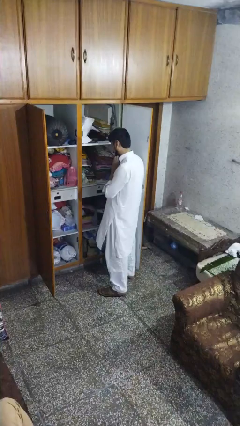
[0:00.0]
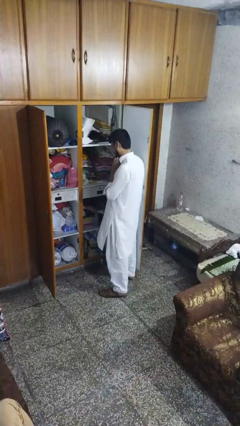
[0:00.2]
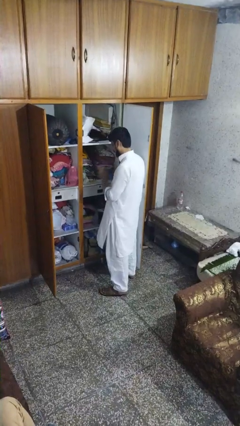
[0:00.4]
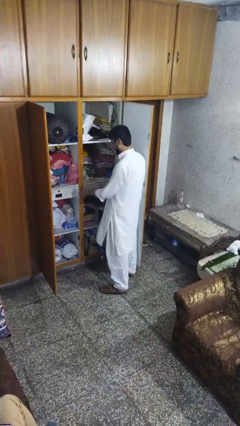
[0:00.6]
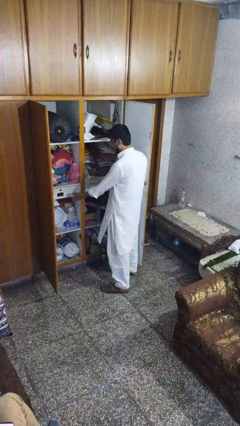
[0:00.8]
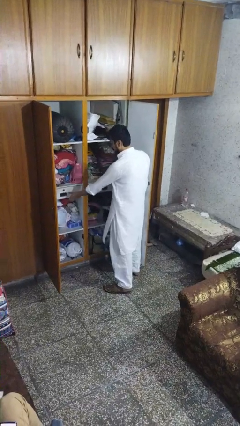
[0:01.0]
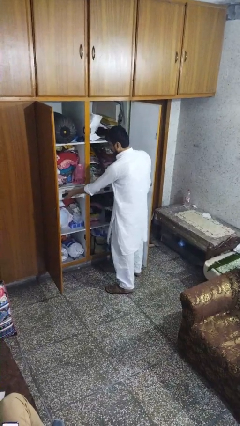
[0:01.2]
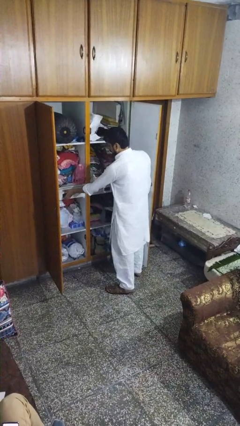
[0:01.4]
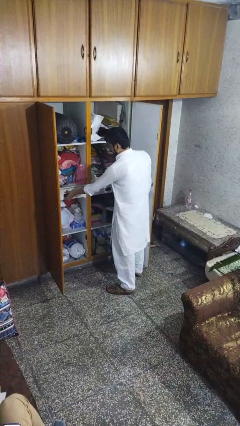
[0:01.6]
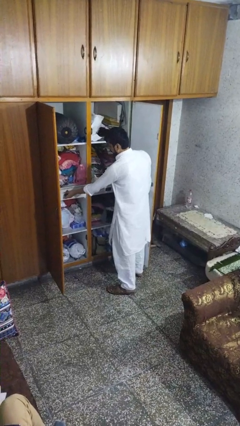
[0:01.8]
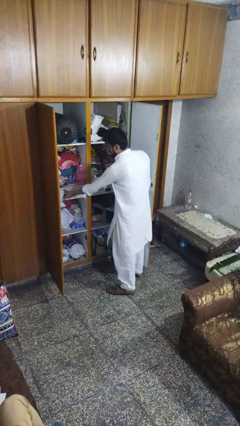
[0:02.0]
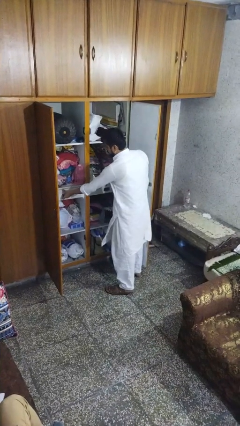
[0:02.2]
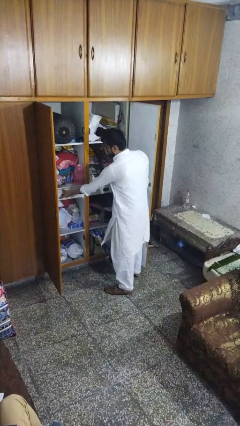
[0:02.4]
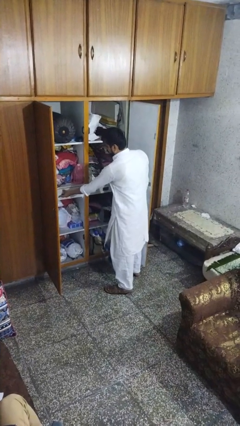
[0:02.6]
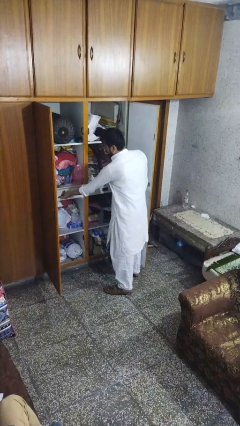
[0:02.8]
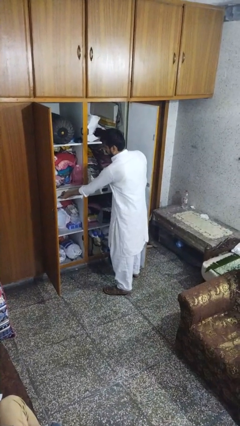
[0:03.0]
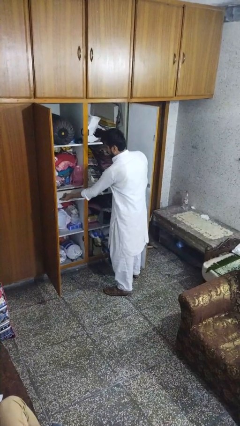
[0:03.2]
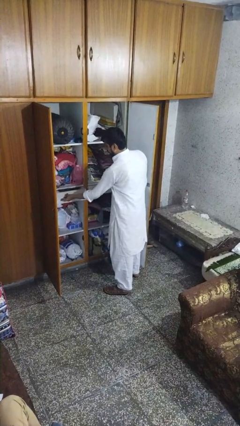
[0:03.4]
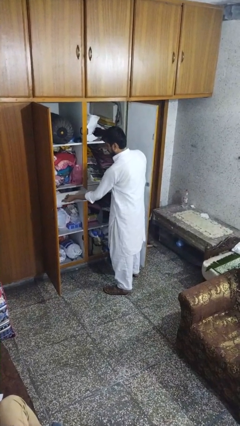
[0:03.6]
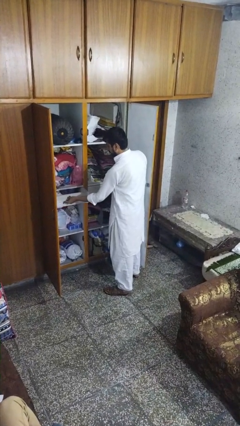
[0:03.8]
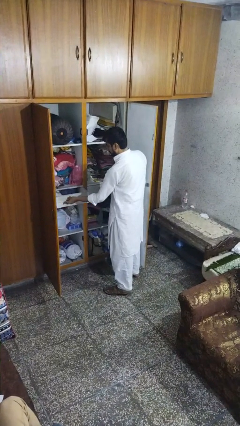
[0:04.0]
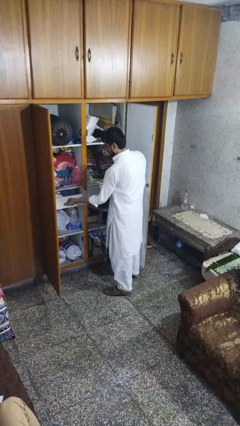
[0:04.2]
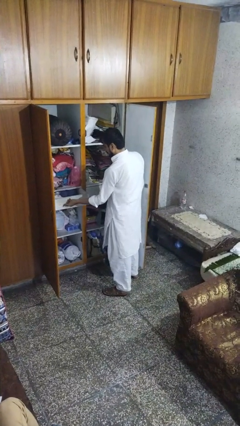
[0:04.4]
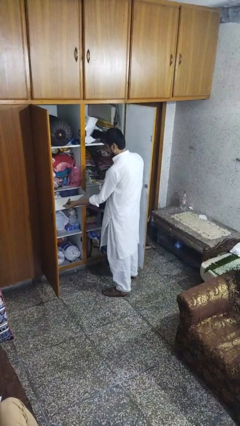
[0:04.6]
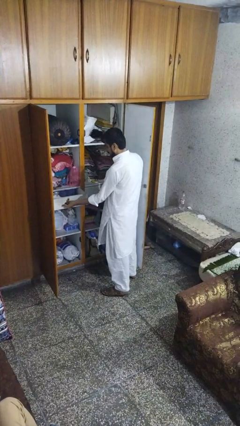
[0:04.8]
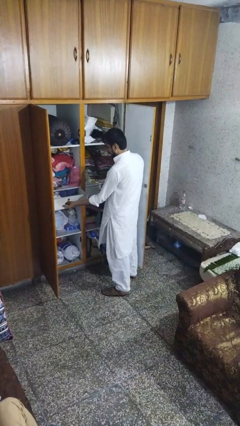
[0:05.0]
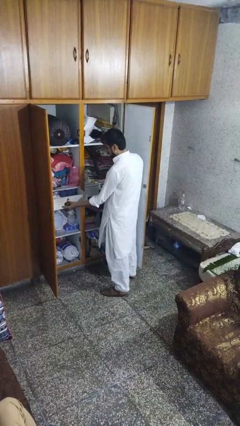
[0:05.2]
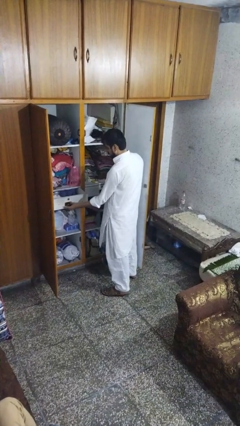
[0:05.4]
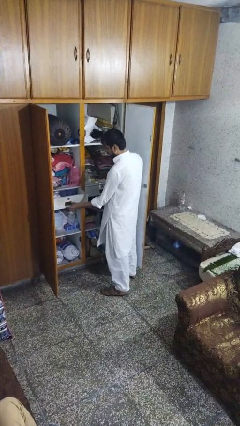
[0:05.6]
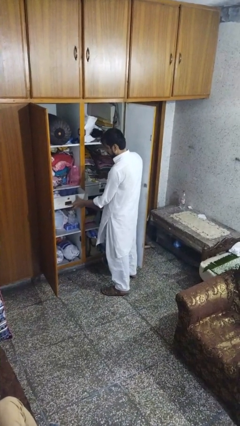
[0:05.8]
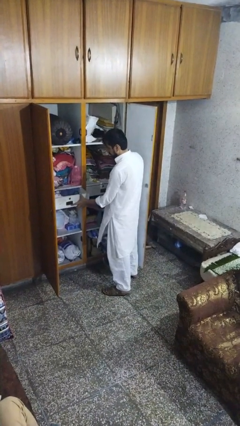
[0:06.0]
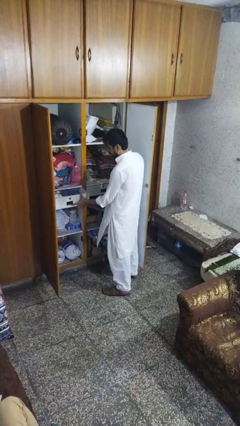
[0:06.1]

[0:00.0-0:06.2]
person opens dresser drawer

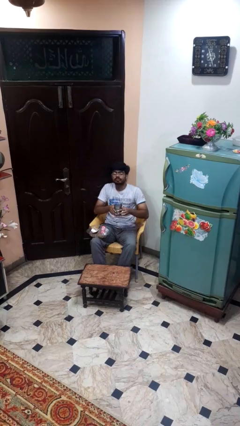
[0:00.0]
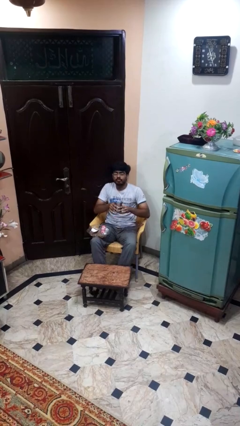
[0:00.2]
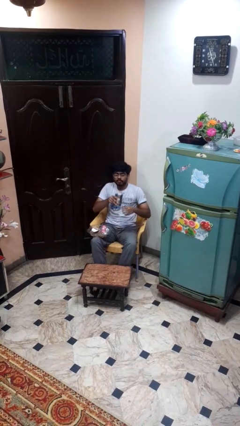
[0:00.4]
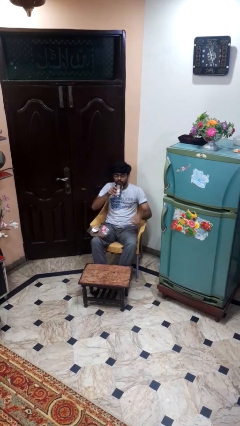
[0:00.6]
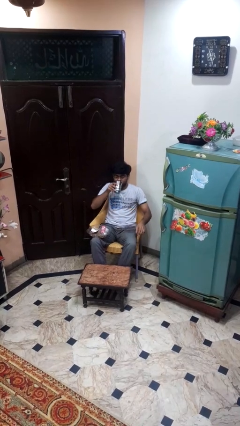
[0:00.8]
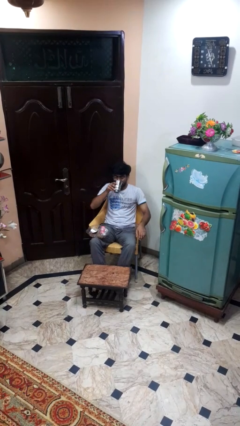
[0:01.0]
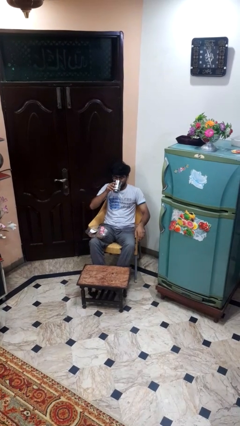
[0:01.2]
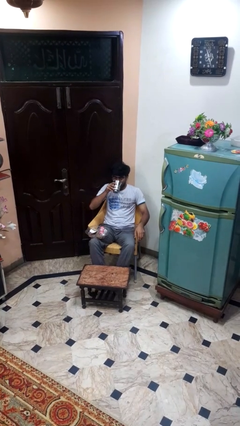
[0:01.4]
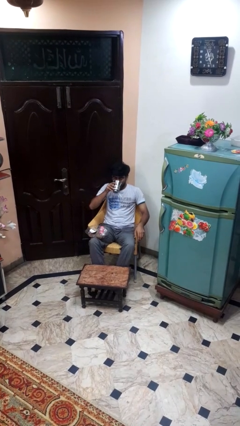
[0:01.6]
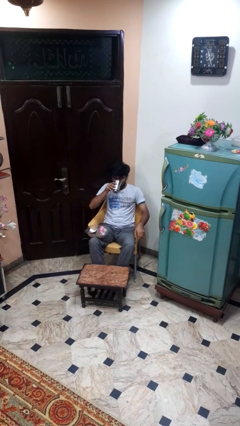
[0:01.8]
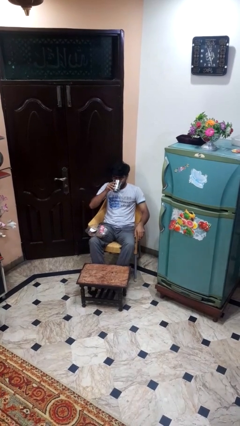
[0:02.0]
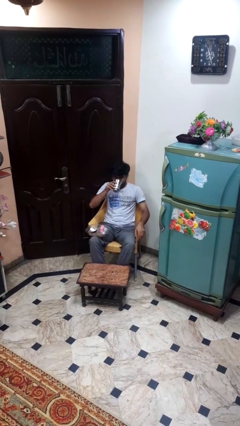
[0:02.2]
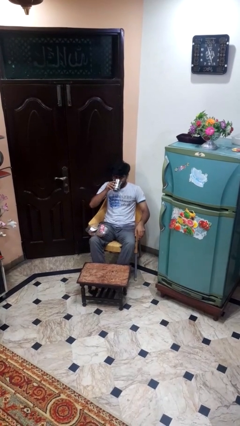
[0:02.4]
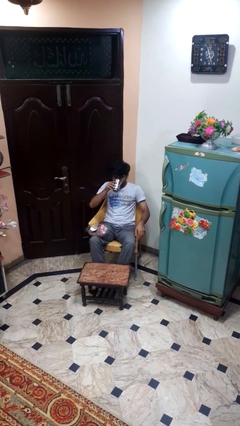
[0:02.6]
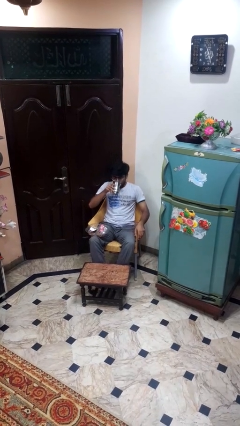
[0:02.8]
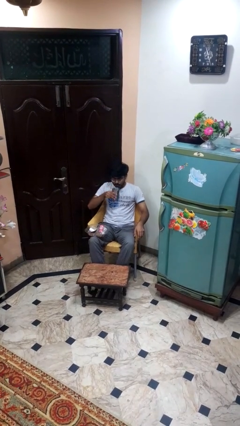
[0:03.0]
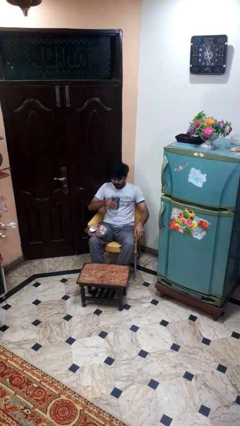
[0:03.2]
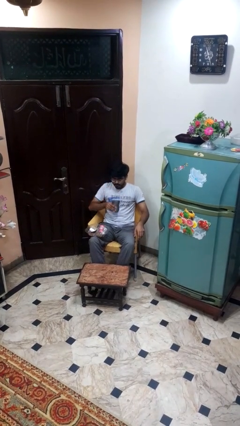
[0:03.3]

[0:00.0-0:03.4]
person drinks from cup

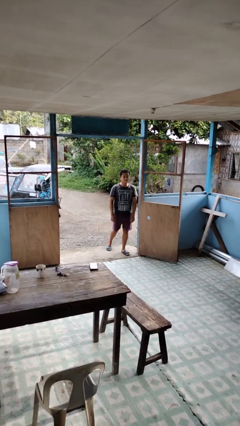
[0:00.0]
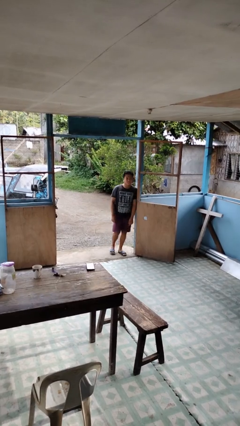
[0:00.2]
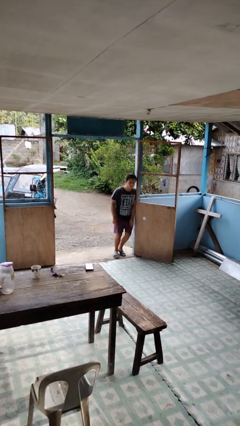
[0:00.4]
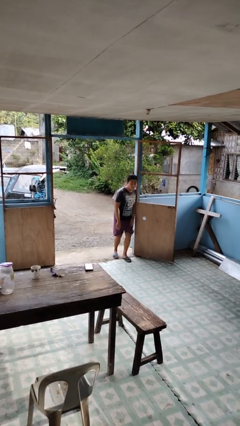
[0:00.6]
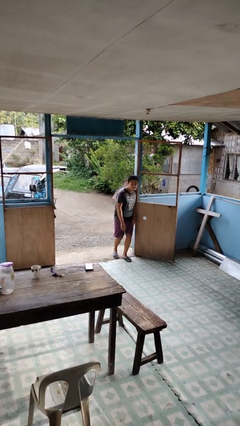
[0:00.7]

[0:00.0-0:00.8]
person bumps into wall

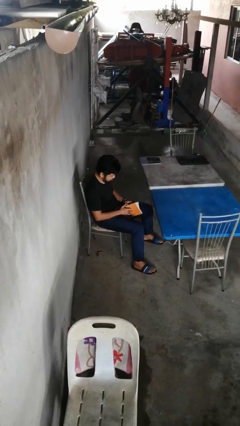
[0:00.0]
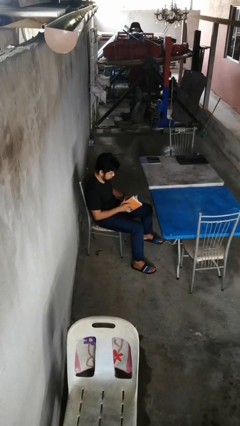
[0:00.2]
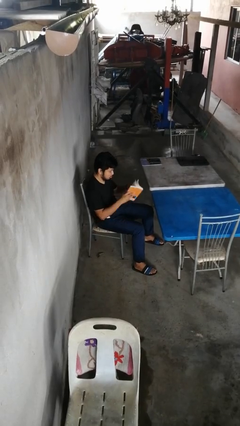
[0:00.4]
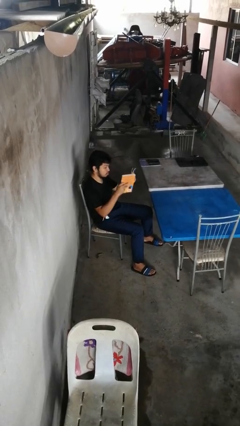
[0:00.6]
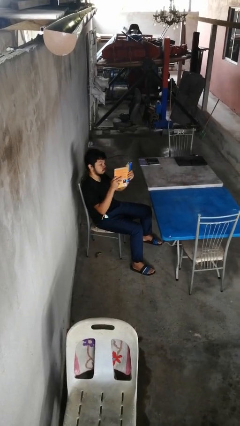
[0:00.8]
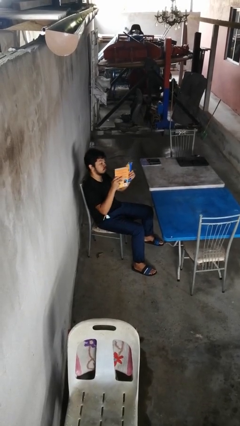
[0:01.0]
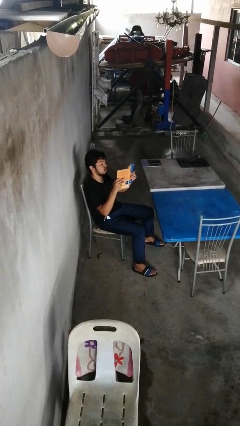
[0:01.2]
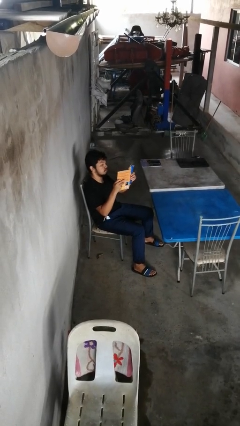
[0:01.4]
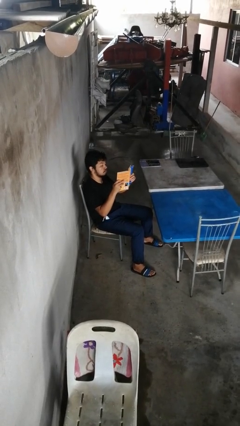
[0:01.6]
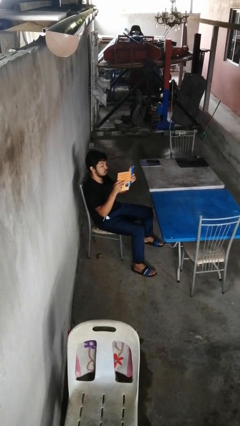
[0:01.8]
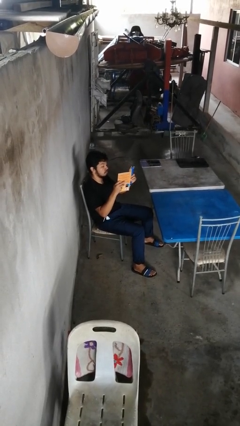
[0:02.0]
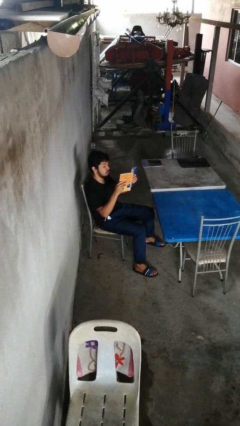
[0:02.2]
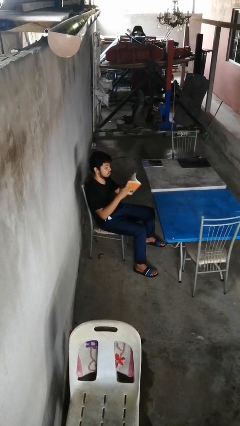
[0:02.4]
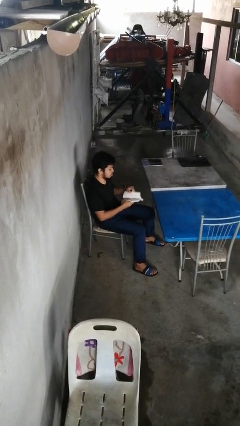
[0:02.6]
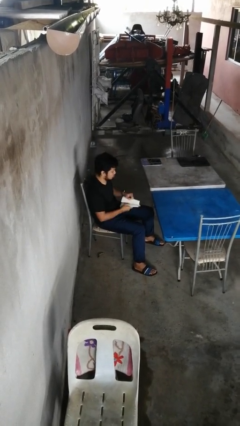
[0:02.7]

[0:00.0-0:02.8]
person reads book

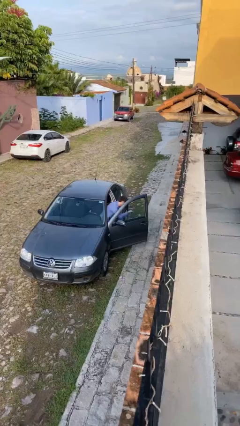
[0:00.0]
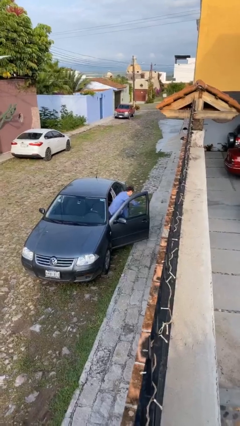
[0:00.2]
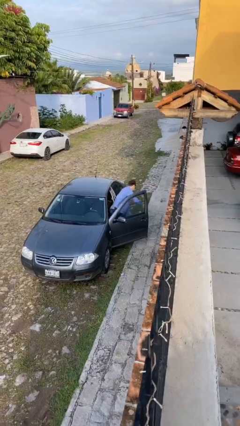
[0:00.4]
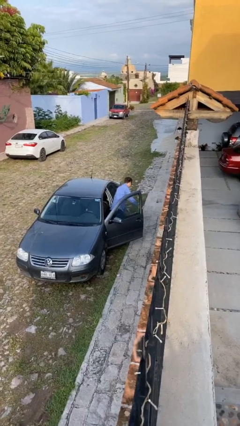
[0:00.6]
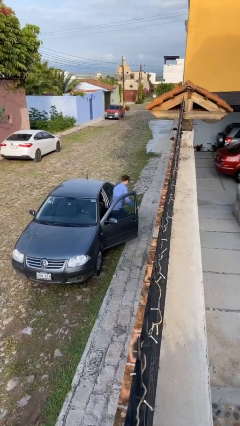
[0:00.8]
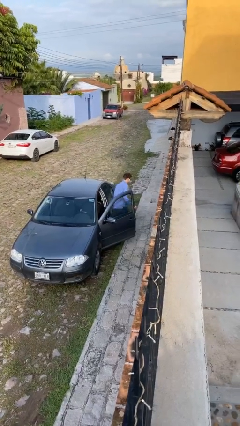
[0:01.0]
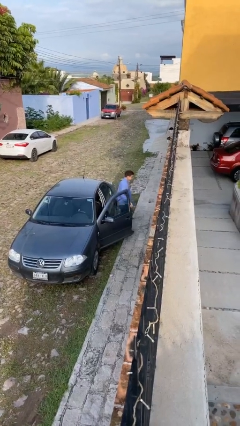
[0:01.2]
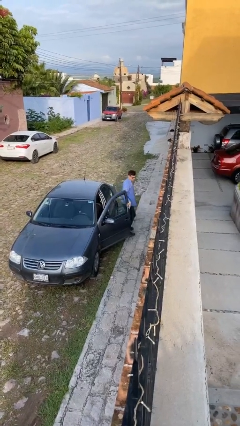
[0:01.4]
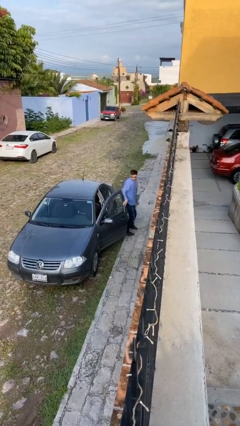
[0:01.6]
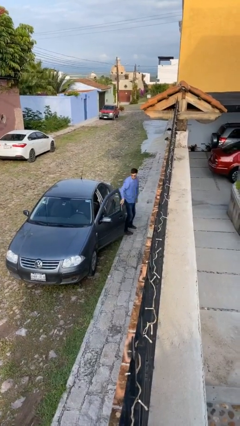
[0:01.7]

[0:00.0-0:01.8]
person exits car

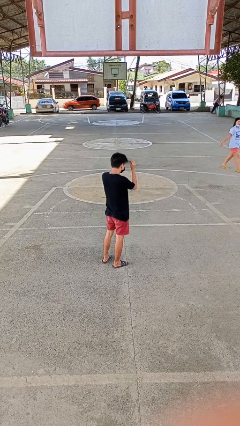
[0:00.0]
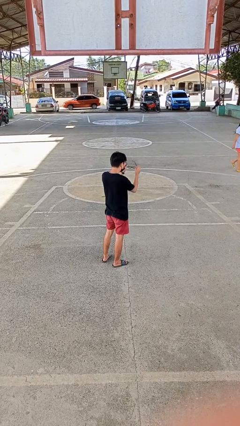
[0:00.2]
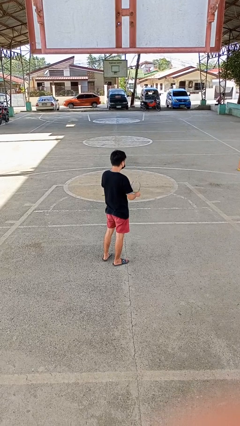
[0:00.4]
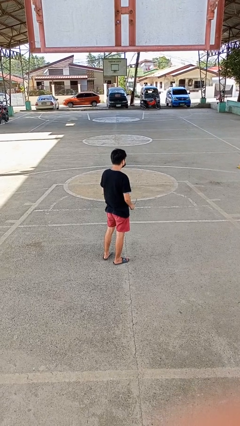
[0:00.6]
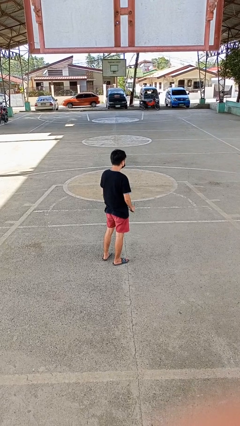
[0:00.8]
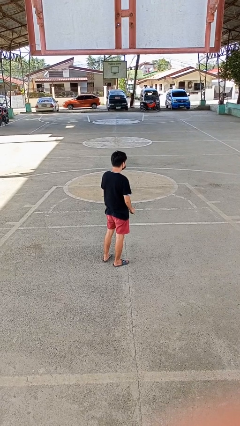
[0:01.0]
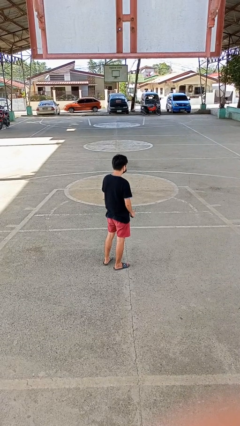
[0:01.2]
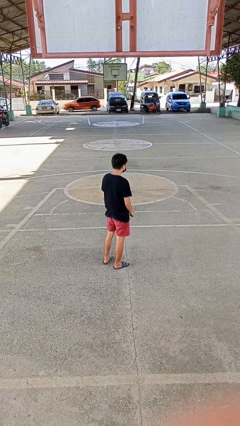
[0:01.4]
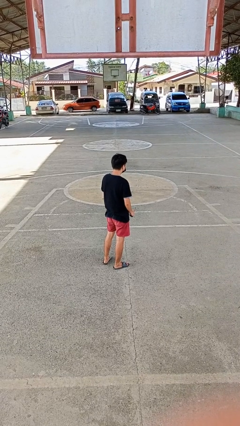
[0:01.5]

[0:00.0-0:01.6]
person takes off glasses

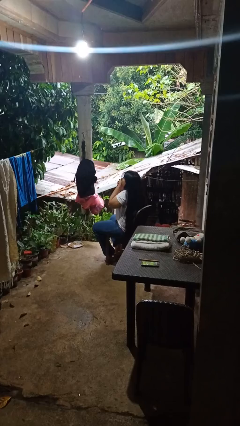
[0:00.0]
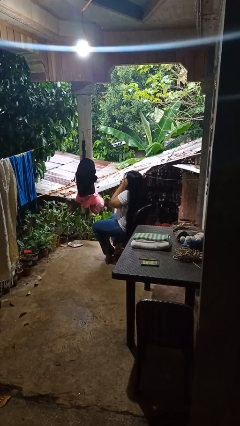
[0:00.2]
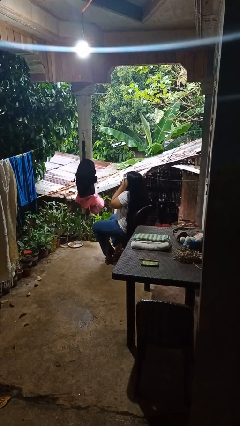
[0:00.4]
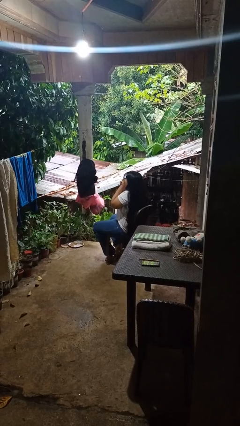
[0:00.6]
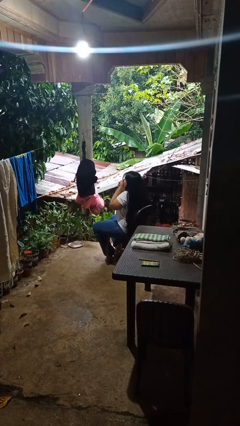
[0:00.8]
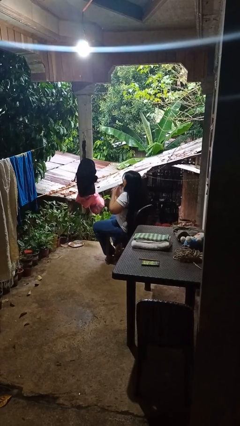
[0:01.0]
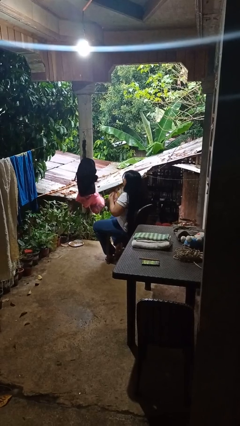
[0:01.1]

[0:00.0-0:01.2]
person covers face with hands
